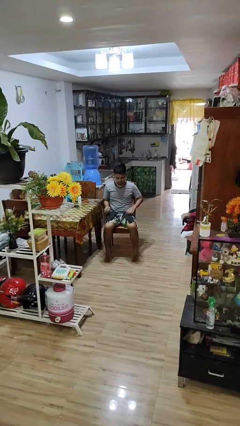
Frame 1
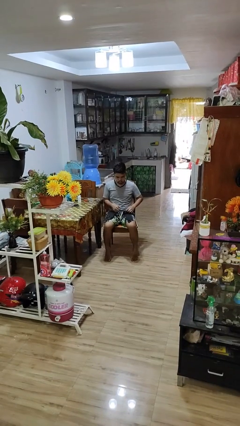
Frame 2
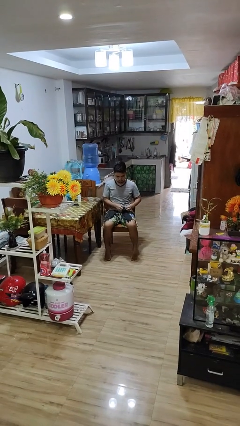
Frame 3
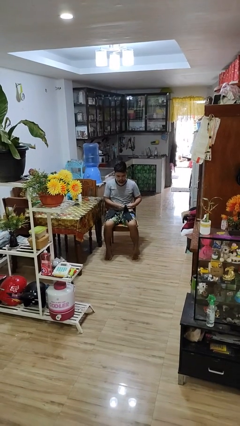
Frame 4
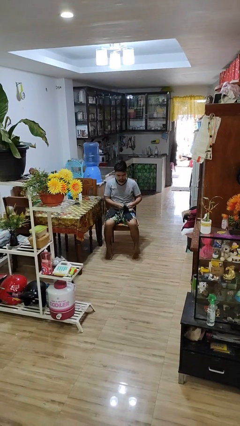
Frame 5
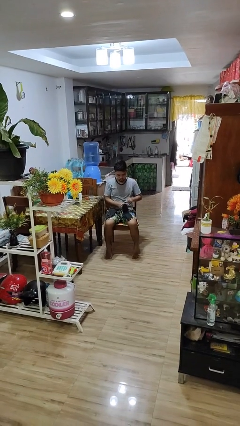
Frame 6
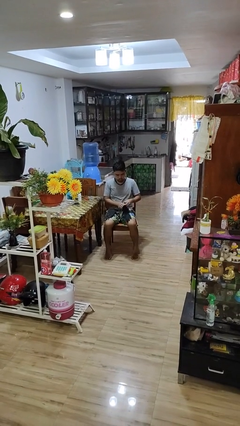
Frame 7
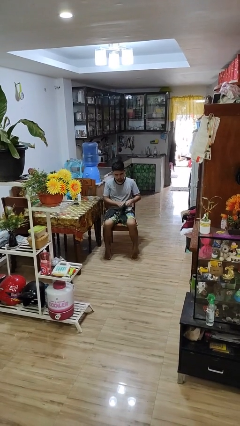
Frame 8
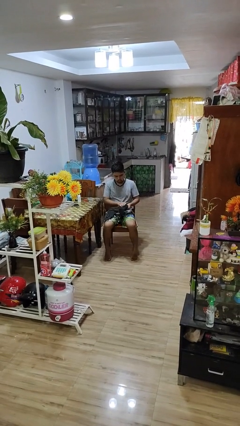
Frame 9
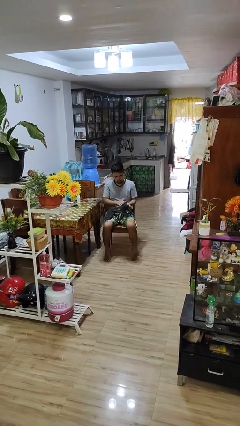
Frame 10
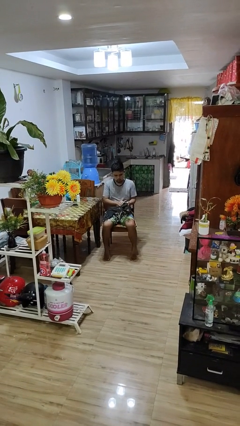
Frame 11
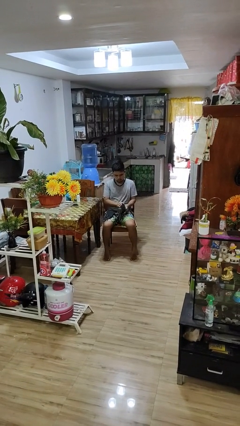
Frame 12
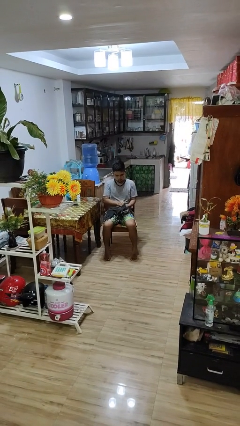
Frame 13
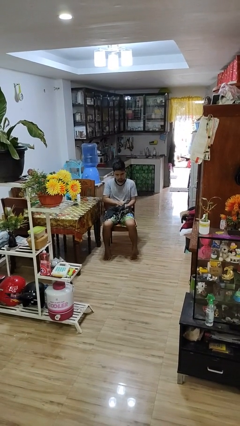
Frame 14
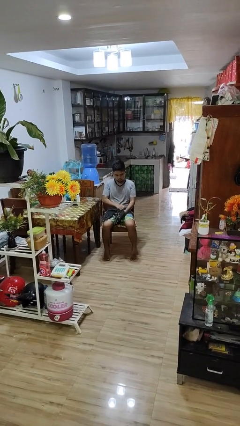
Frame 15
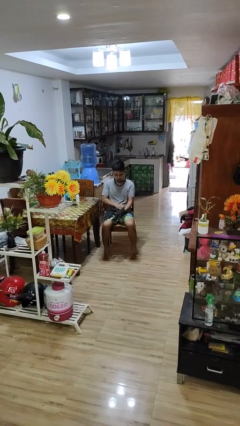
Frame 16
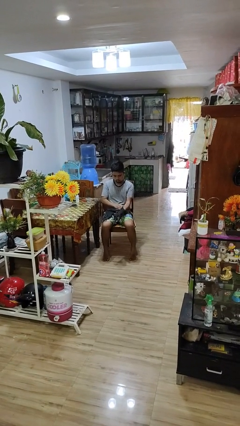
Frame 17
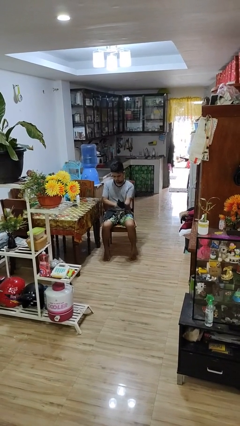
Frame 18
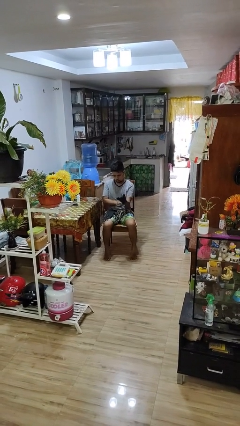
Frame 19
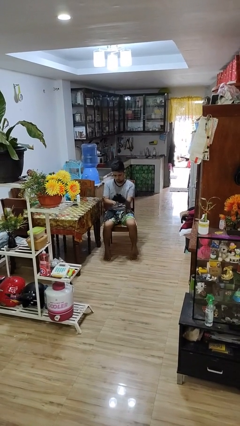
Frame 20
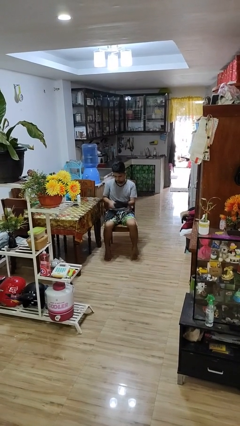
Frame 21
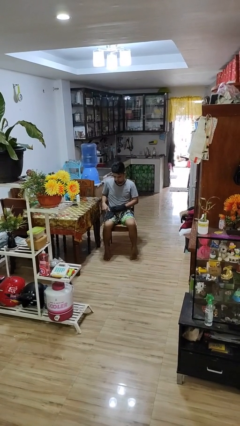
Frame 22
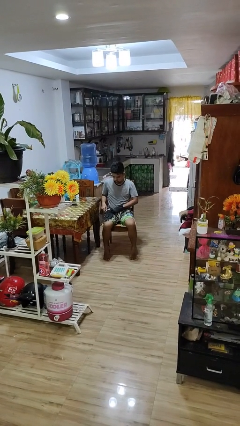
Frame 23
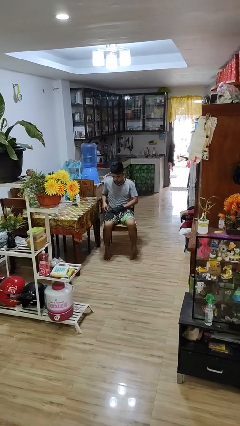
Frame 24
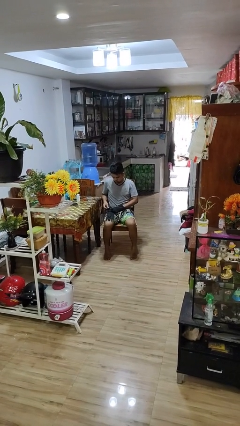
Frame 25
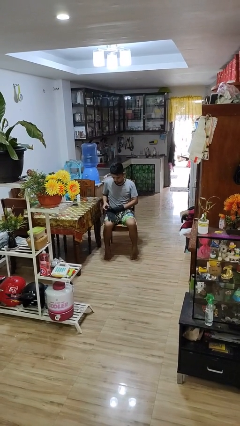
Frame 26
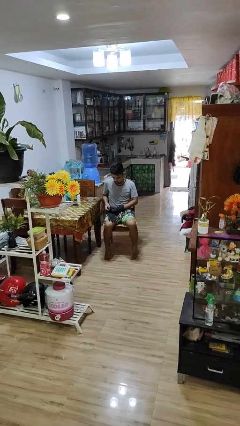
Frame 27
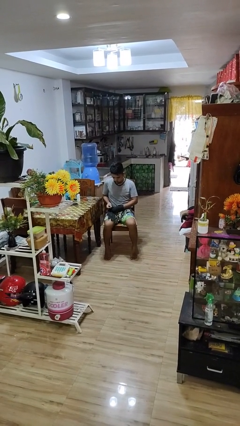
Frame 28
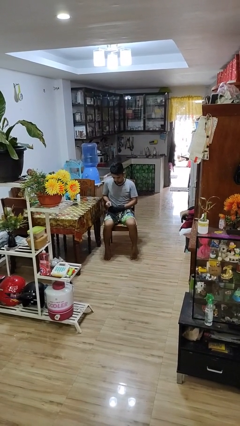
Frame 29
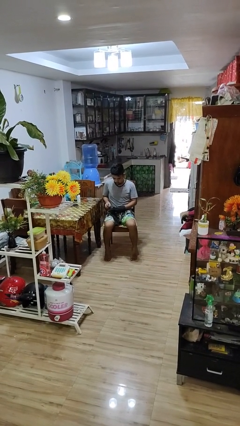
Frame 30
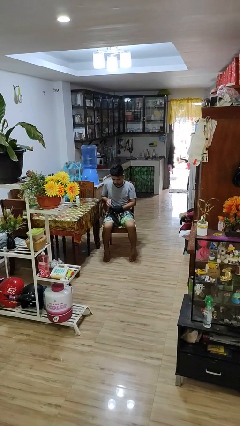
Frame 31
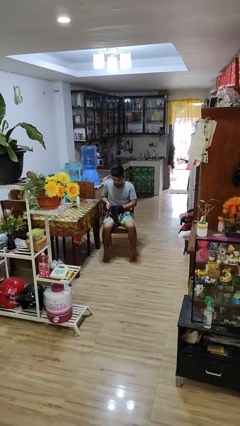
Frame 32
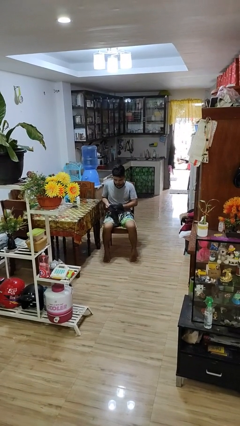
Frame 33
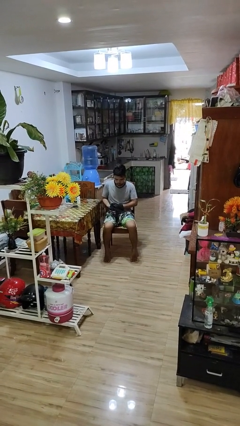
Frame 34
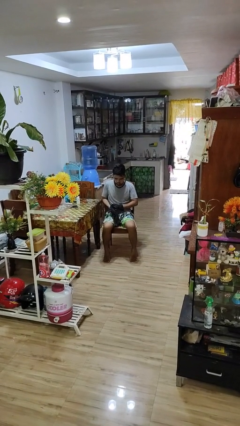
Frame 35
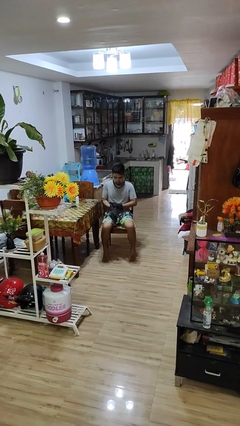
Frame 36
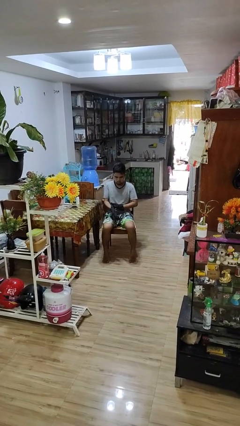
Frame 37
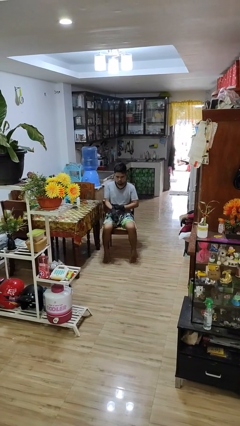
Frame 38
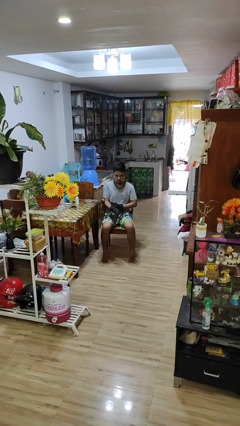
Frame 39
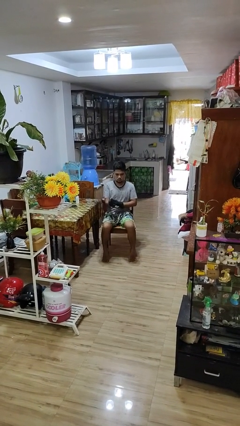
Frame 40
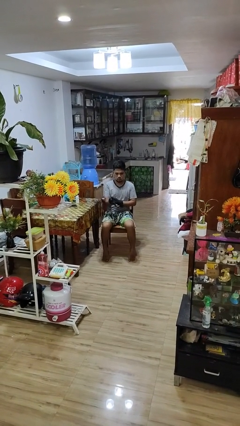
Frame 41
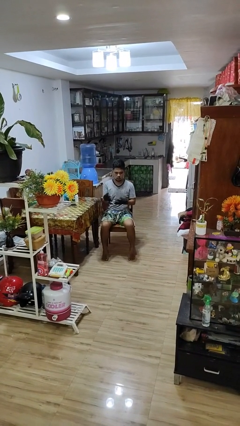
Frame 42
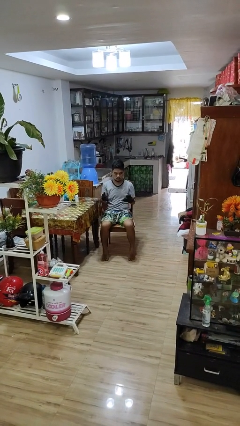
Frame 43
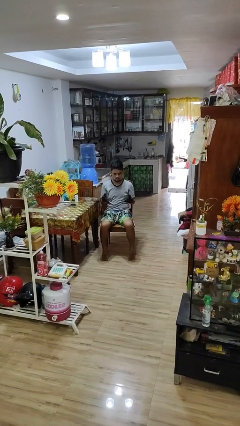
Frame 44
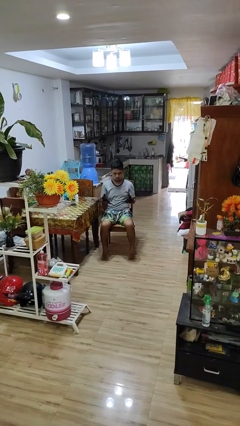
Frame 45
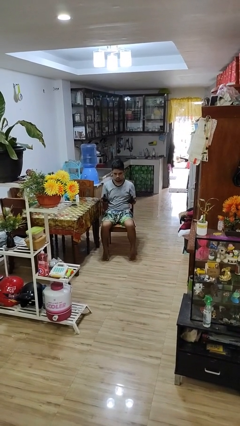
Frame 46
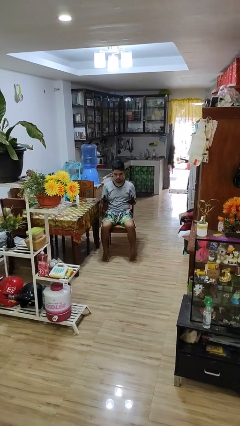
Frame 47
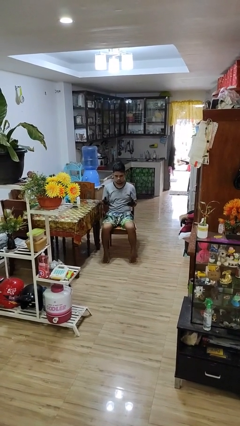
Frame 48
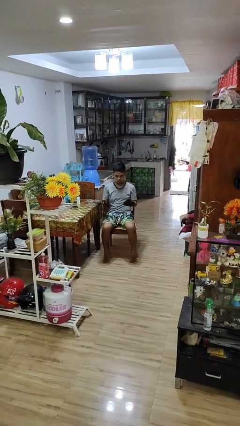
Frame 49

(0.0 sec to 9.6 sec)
person puts on gloves

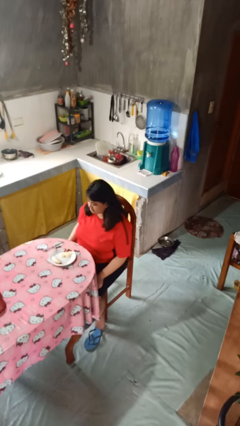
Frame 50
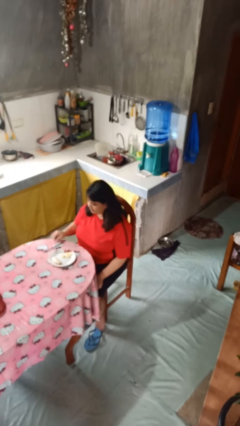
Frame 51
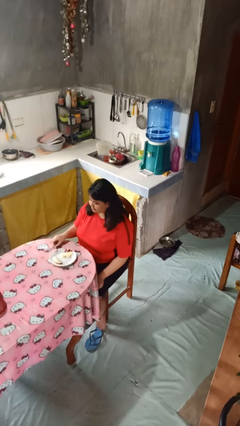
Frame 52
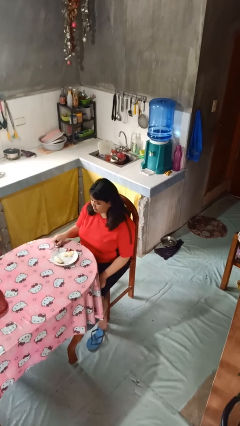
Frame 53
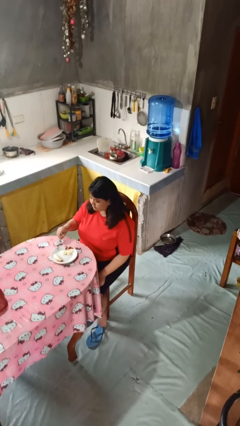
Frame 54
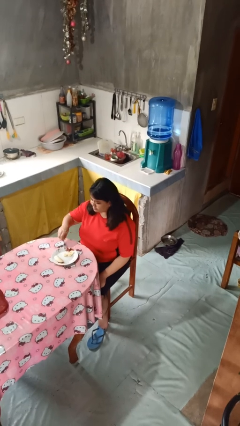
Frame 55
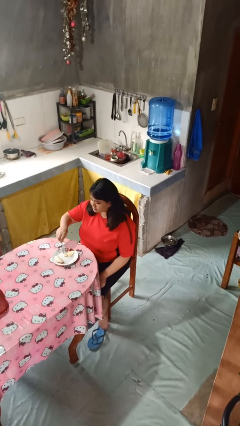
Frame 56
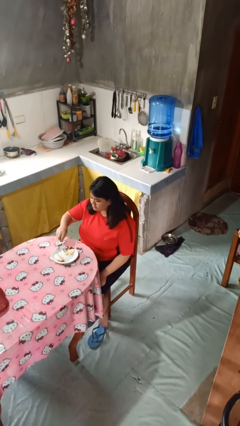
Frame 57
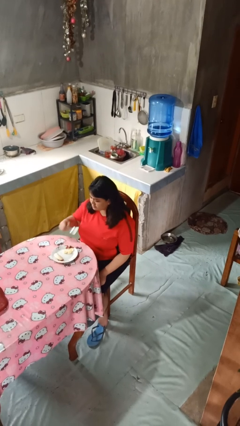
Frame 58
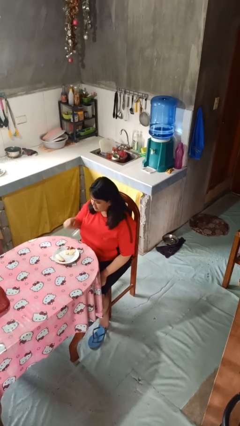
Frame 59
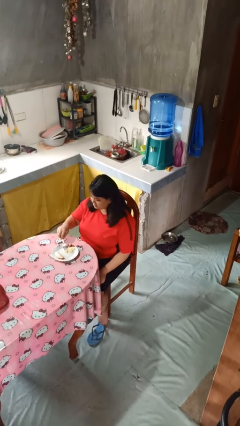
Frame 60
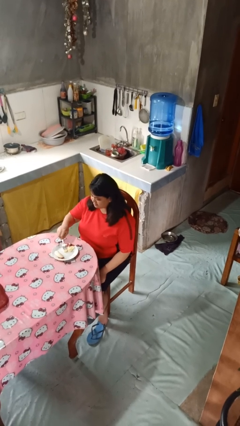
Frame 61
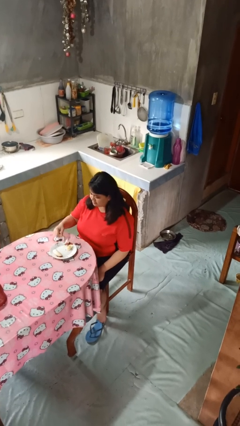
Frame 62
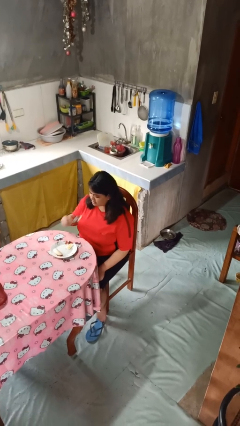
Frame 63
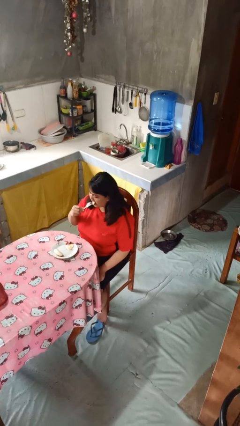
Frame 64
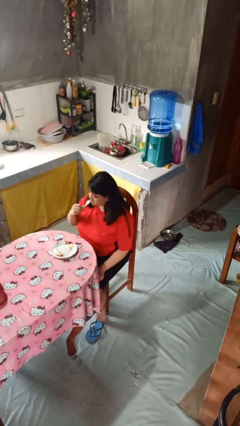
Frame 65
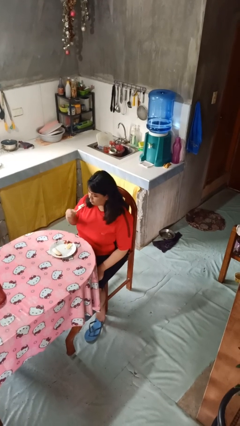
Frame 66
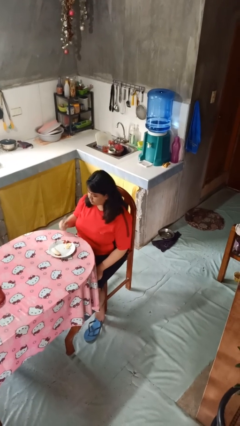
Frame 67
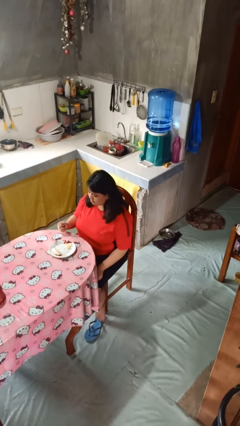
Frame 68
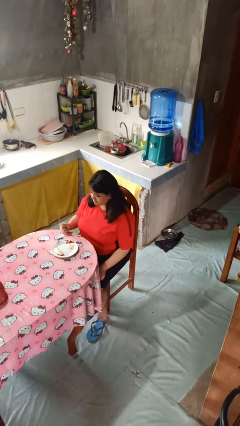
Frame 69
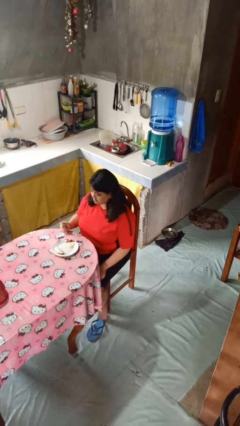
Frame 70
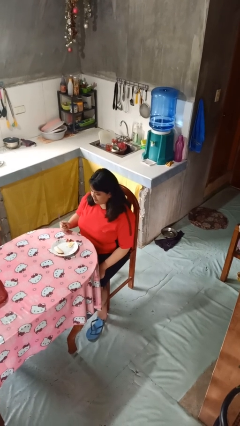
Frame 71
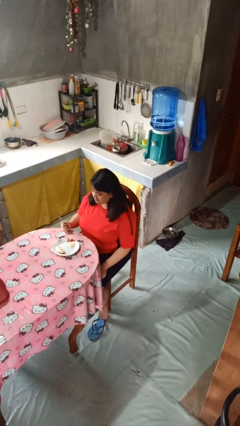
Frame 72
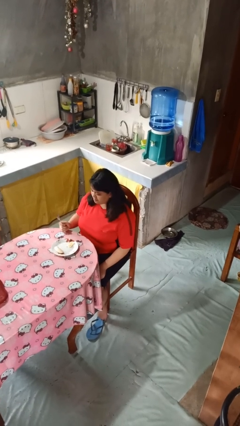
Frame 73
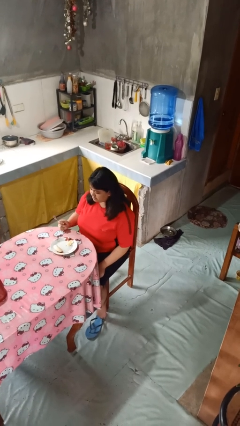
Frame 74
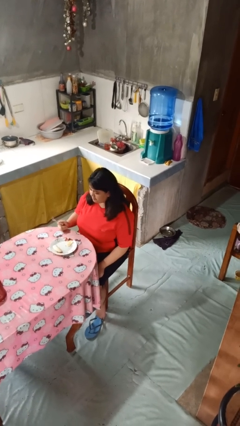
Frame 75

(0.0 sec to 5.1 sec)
person eats with utensil

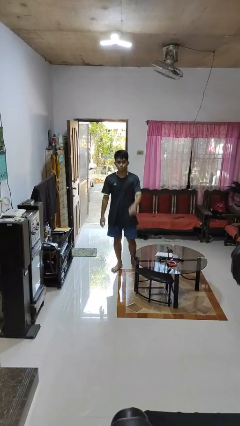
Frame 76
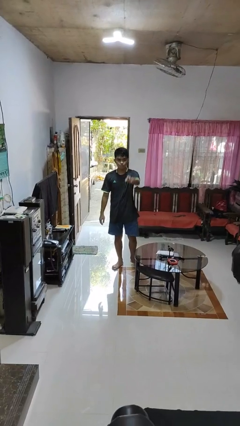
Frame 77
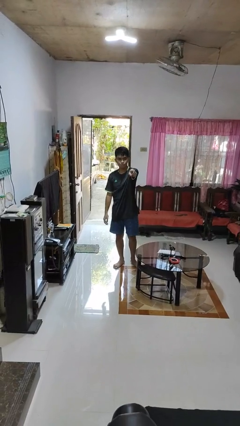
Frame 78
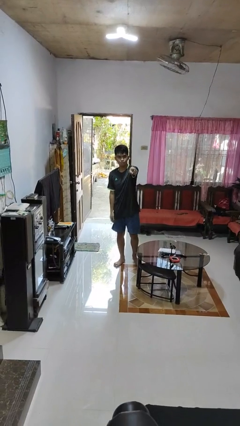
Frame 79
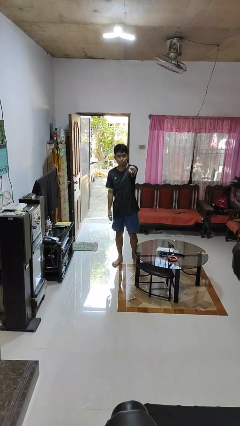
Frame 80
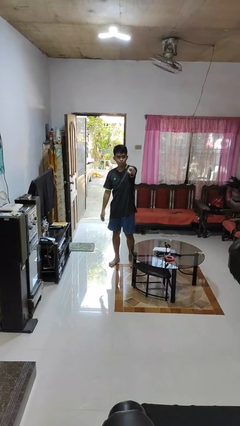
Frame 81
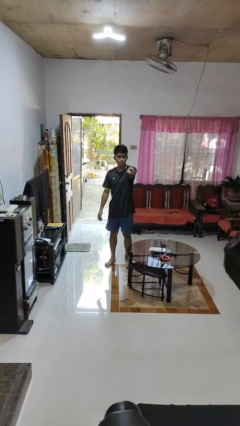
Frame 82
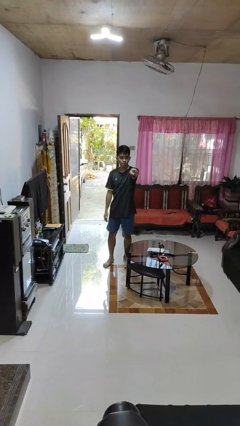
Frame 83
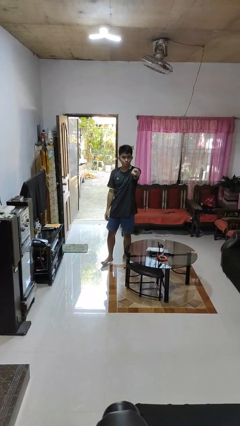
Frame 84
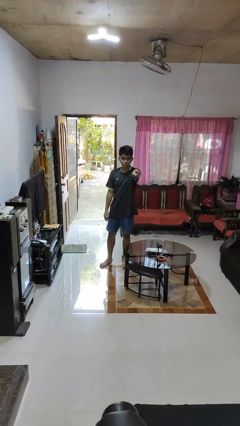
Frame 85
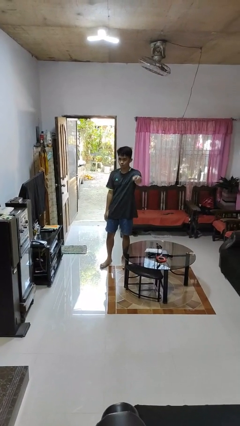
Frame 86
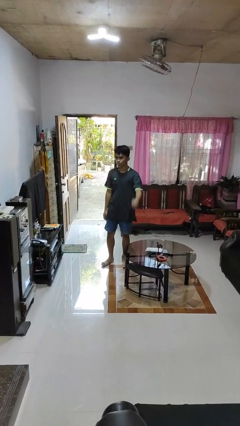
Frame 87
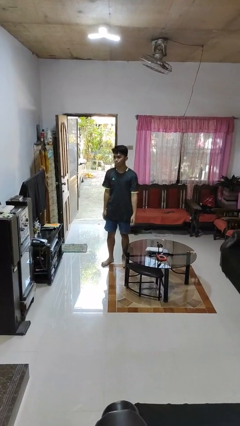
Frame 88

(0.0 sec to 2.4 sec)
person points at person

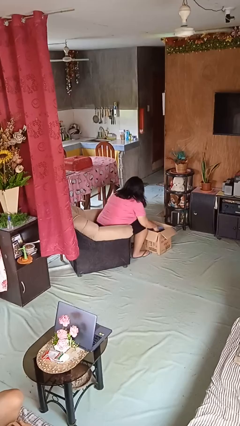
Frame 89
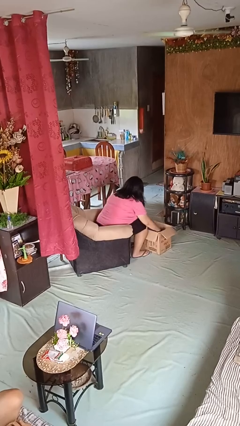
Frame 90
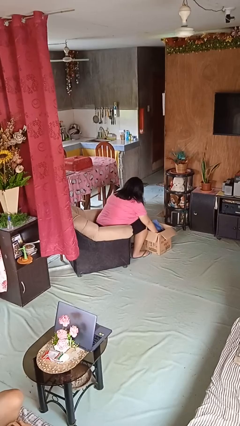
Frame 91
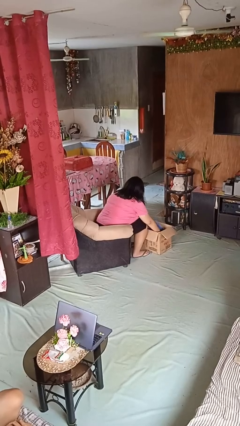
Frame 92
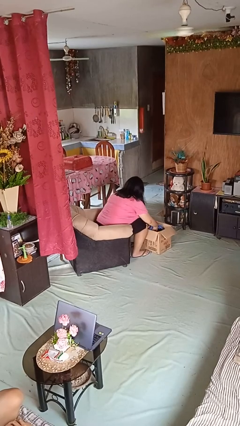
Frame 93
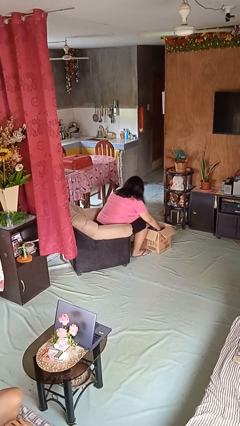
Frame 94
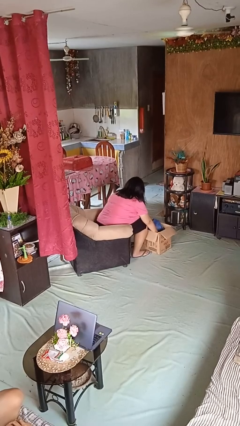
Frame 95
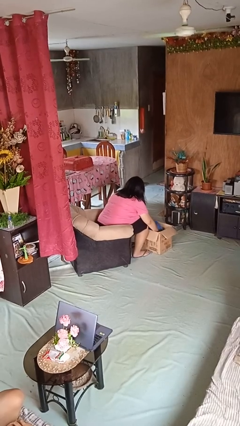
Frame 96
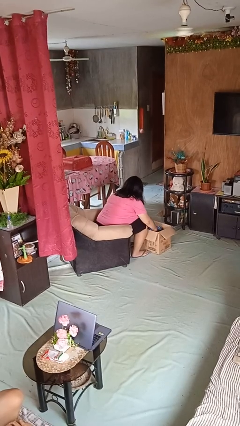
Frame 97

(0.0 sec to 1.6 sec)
person searches in box
